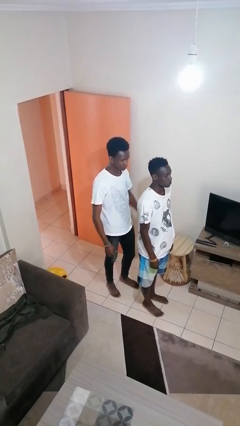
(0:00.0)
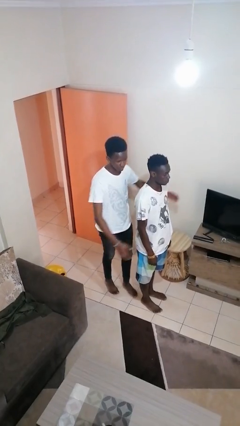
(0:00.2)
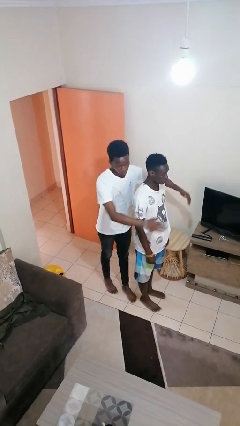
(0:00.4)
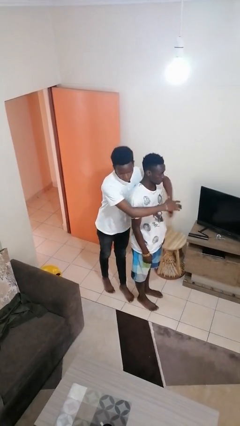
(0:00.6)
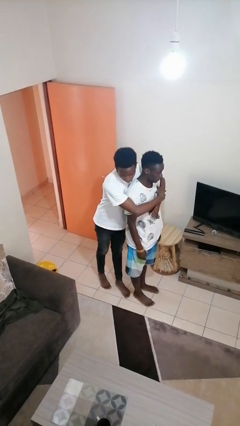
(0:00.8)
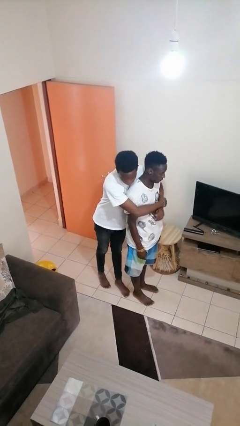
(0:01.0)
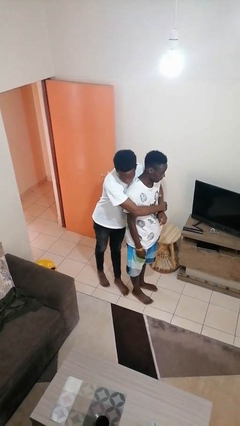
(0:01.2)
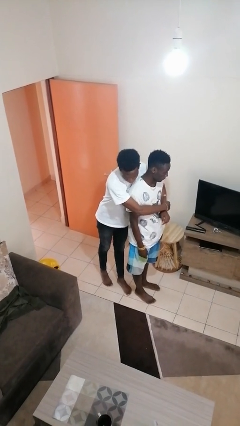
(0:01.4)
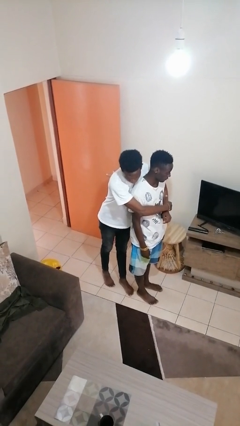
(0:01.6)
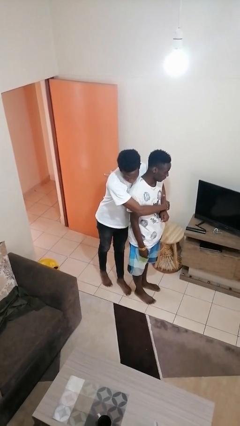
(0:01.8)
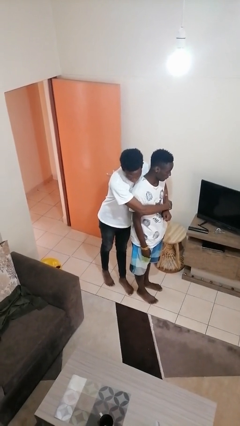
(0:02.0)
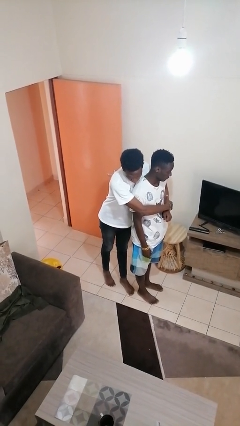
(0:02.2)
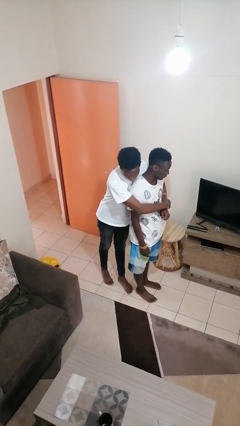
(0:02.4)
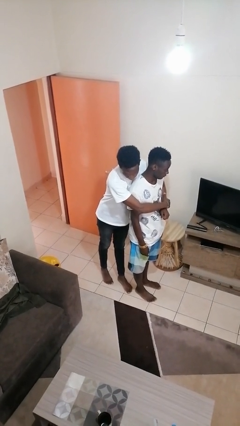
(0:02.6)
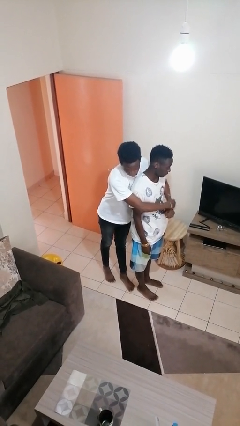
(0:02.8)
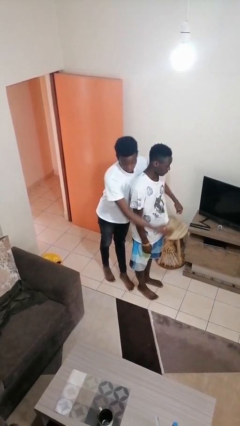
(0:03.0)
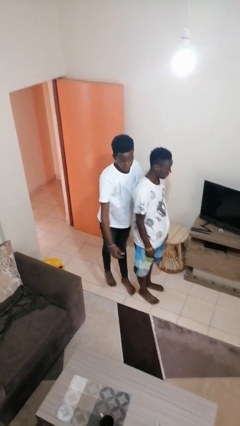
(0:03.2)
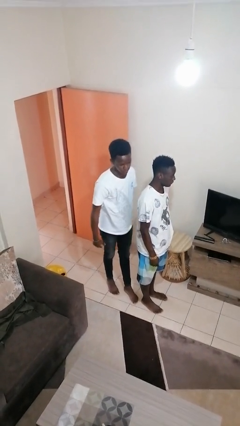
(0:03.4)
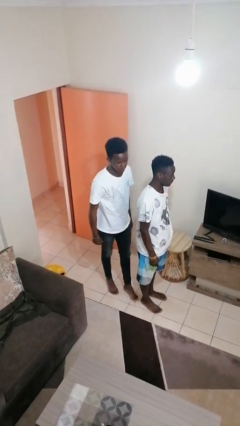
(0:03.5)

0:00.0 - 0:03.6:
person hugs person from behind

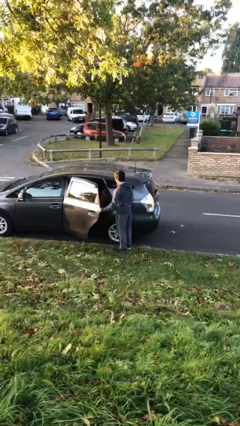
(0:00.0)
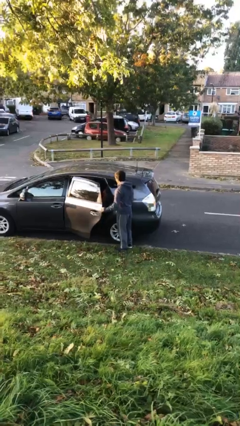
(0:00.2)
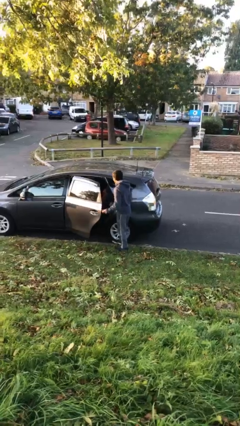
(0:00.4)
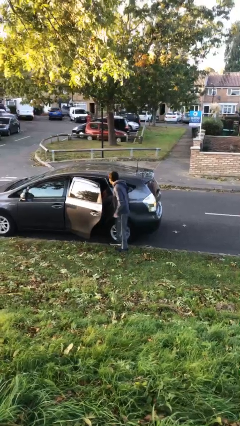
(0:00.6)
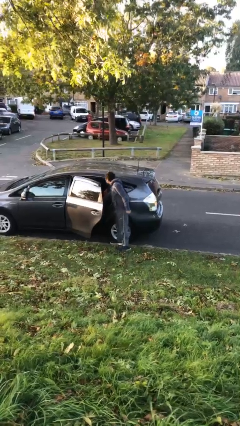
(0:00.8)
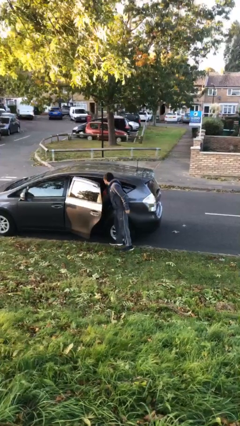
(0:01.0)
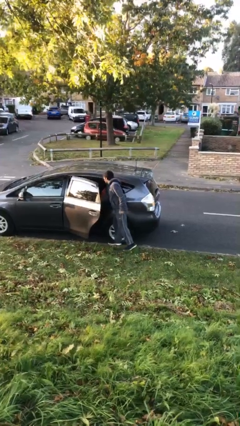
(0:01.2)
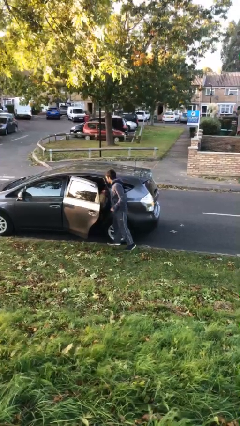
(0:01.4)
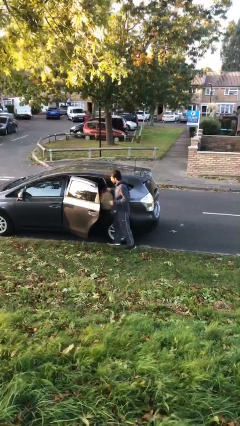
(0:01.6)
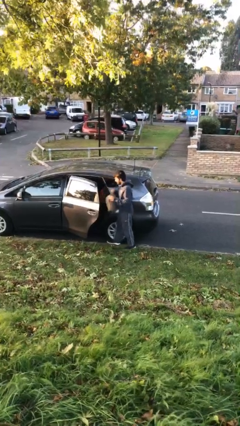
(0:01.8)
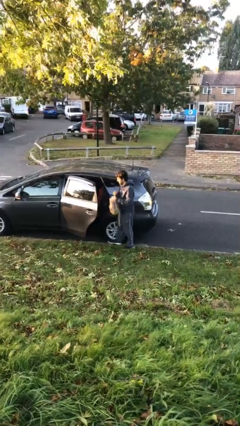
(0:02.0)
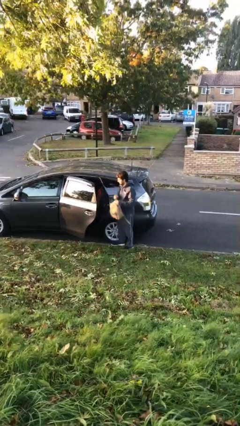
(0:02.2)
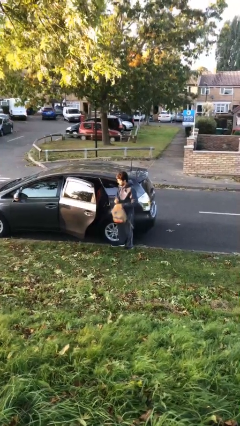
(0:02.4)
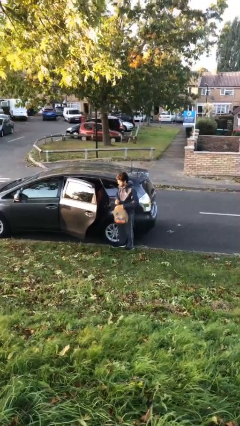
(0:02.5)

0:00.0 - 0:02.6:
person unloads car

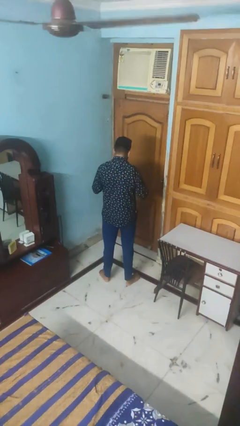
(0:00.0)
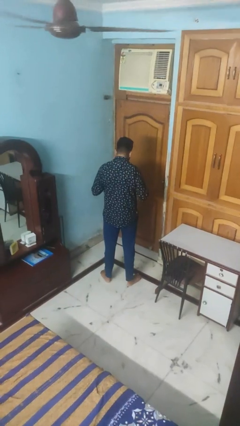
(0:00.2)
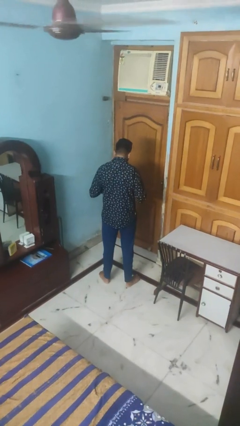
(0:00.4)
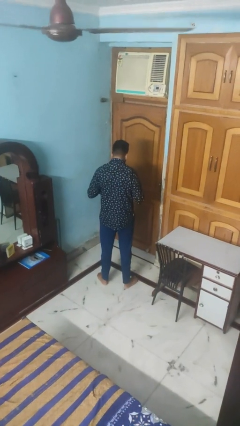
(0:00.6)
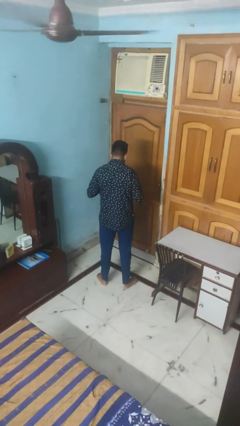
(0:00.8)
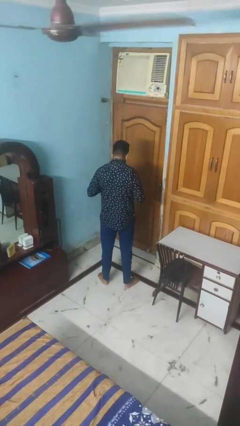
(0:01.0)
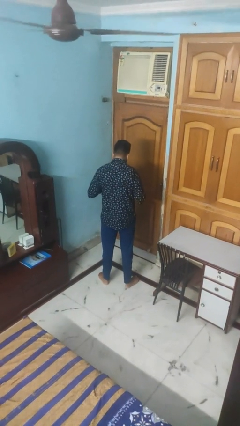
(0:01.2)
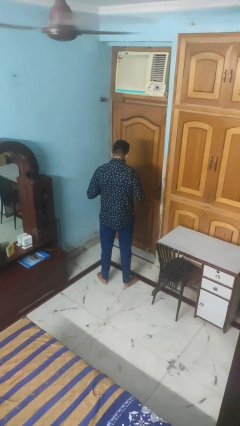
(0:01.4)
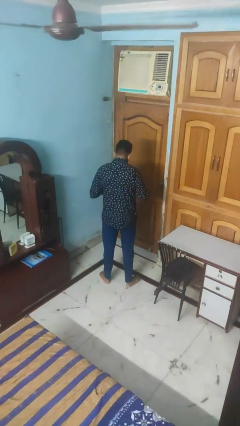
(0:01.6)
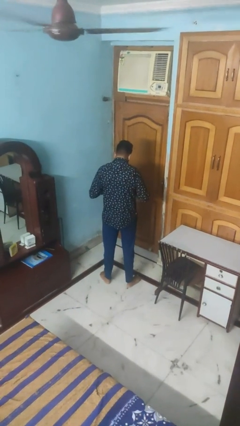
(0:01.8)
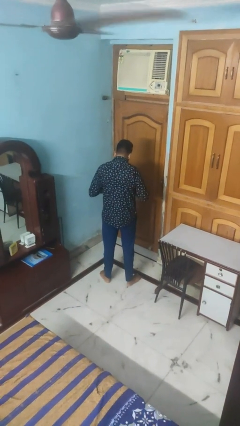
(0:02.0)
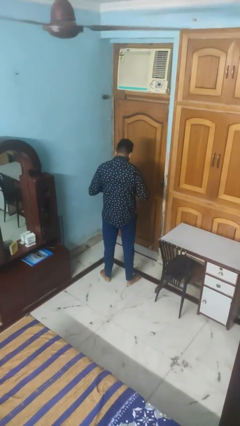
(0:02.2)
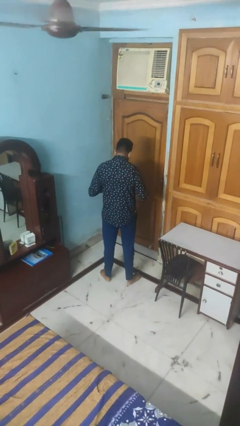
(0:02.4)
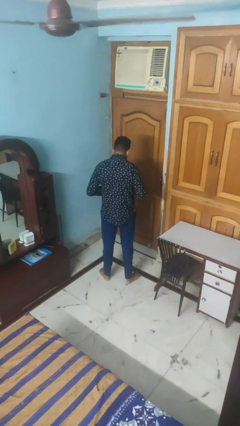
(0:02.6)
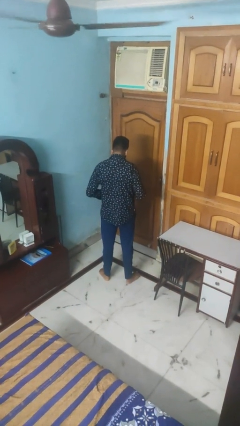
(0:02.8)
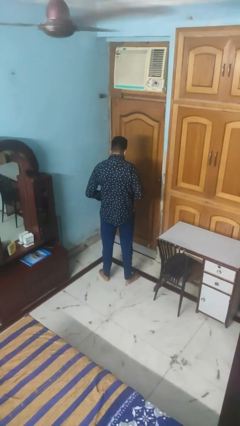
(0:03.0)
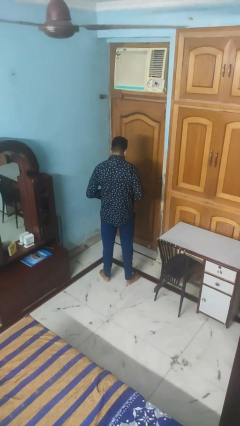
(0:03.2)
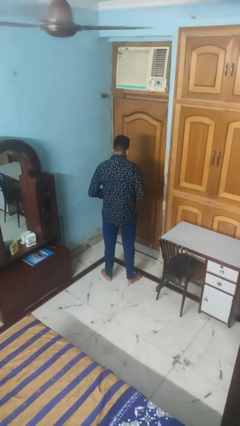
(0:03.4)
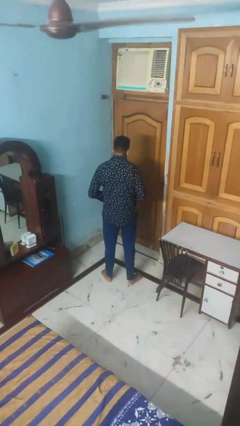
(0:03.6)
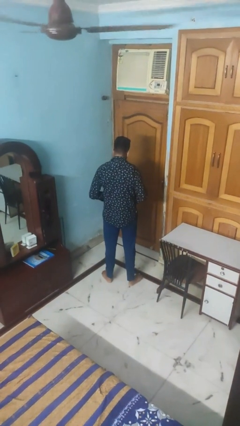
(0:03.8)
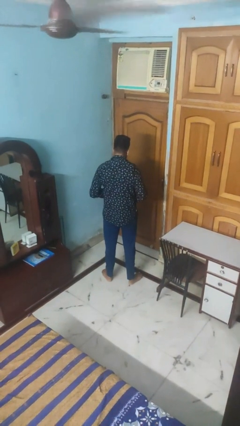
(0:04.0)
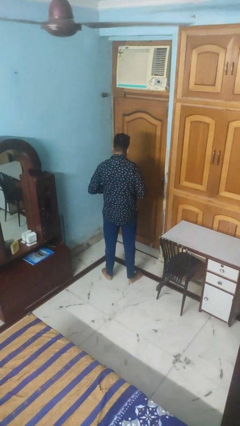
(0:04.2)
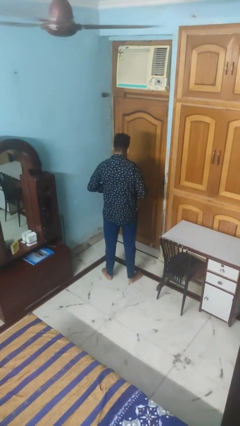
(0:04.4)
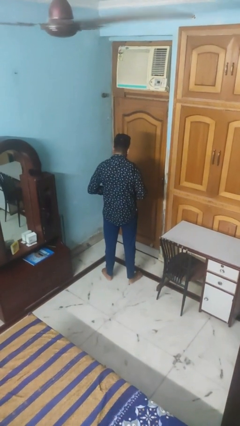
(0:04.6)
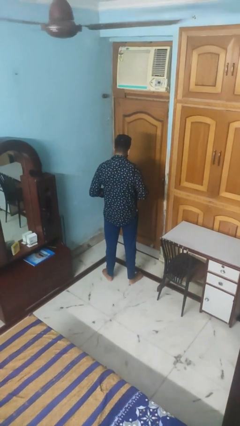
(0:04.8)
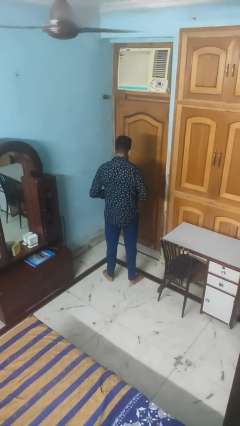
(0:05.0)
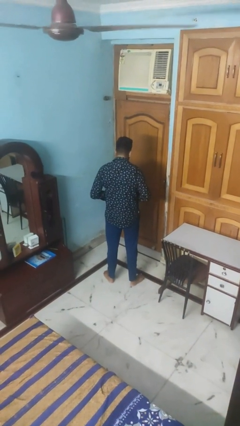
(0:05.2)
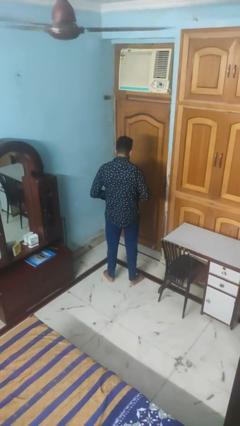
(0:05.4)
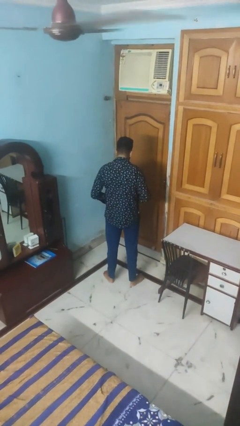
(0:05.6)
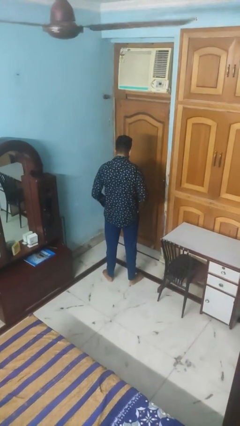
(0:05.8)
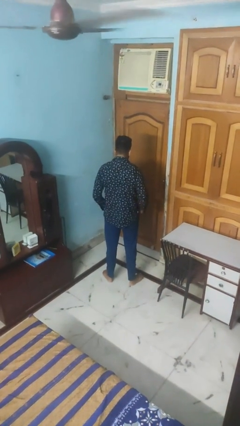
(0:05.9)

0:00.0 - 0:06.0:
person unbuttons shirt

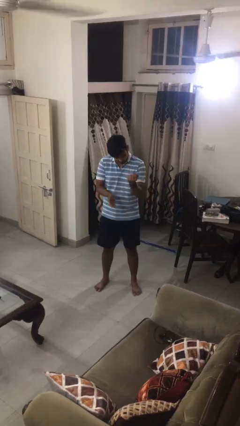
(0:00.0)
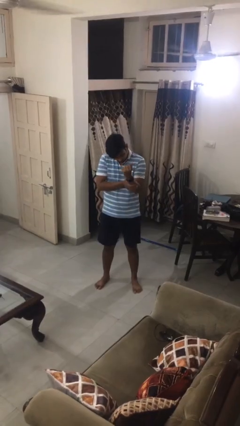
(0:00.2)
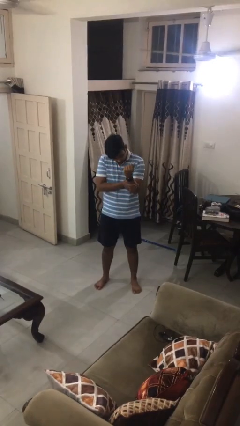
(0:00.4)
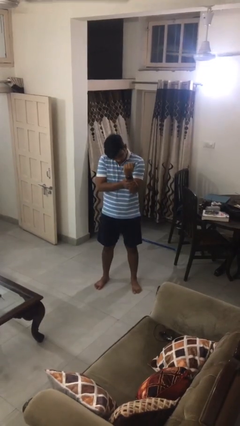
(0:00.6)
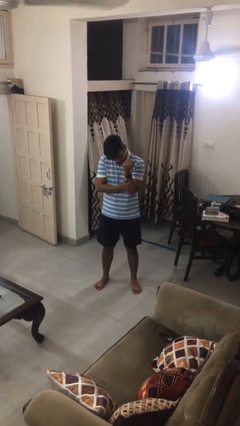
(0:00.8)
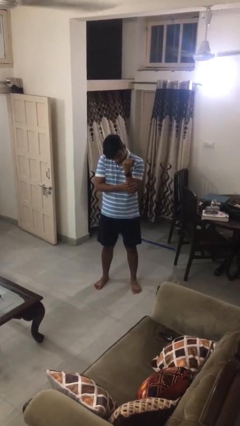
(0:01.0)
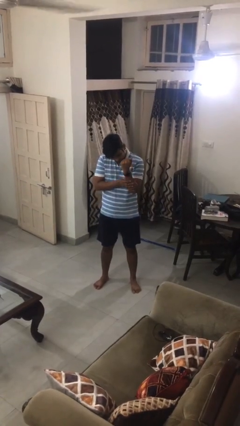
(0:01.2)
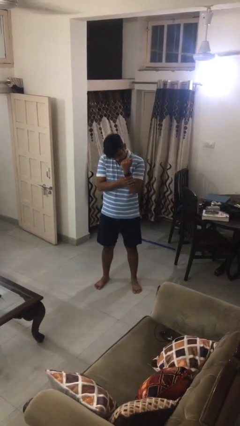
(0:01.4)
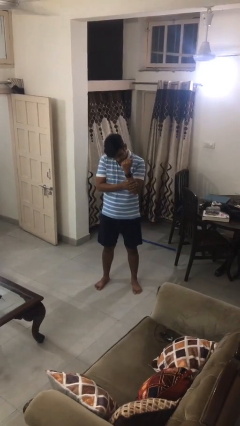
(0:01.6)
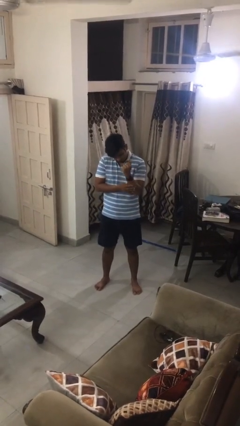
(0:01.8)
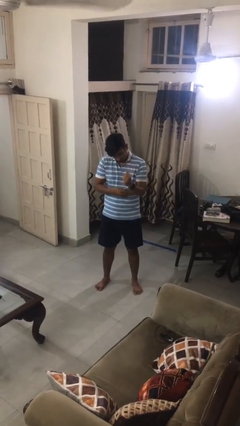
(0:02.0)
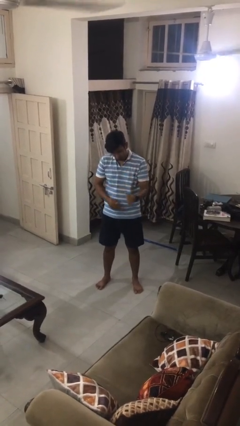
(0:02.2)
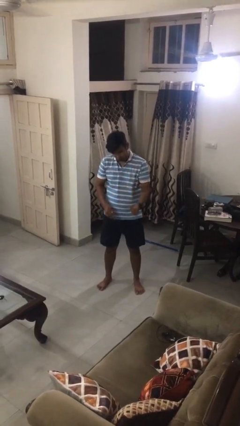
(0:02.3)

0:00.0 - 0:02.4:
person swats bug

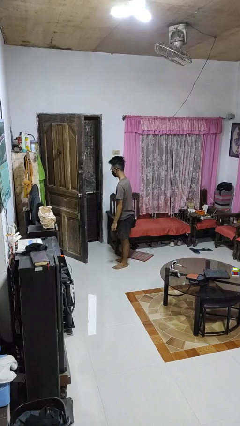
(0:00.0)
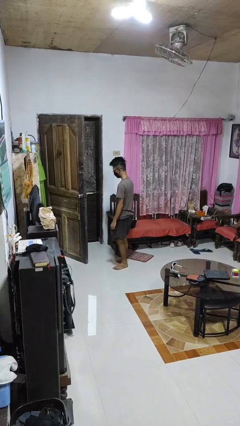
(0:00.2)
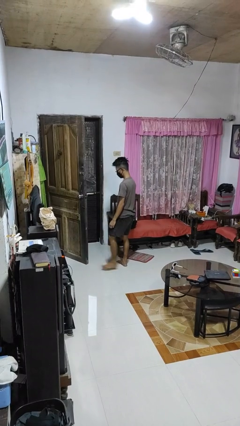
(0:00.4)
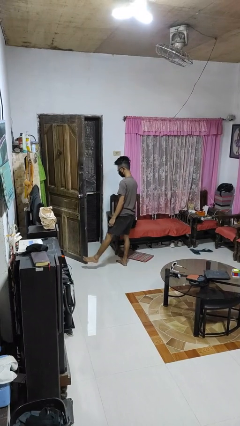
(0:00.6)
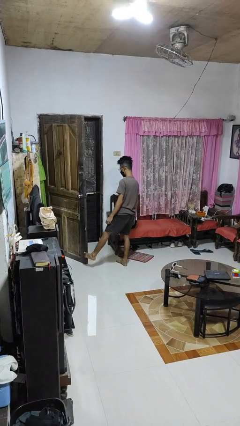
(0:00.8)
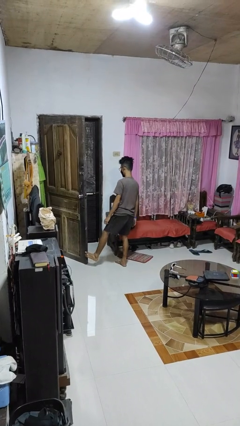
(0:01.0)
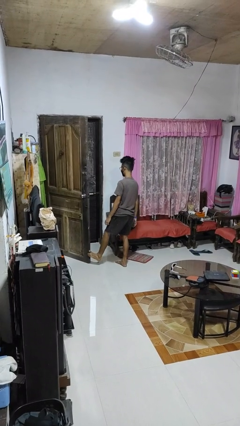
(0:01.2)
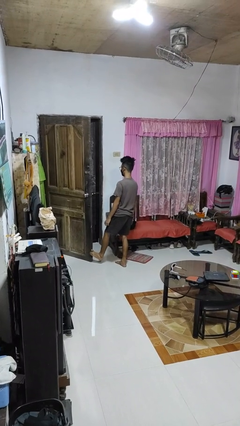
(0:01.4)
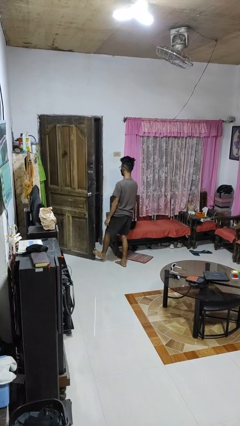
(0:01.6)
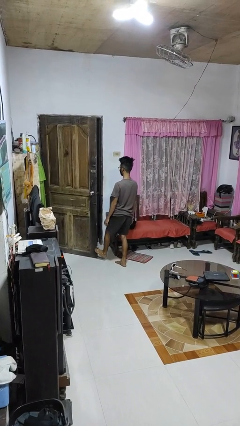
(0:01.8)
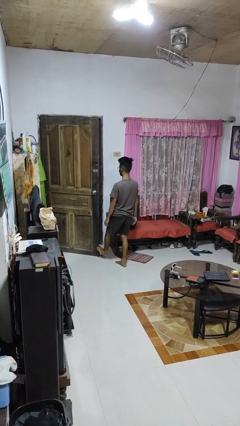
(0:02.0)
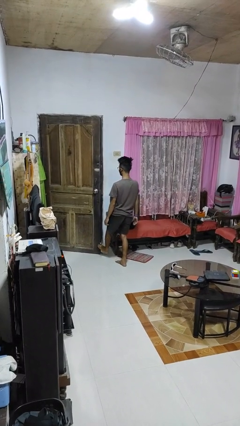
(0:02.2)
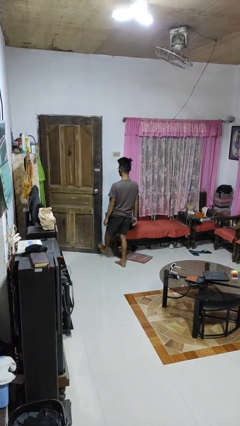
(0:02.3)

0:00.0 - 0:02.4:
person closes door with foot

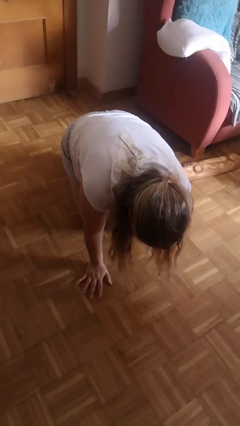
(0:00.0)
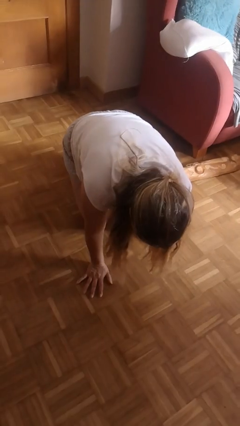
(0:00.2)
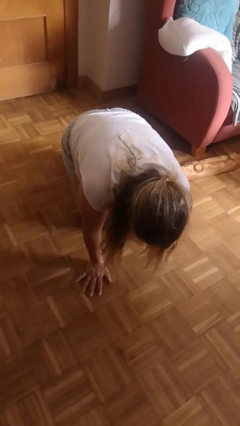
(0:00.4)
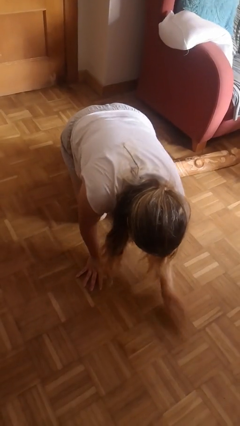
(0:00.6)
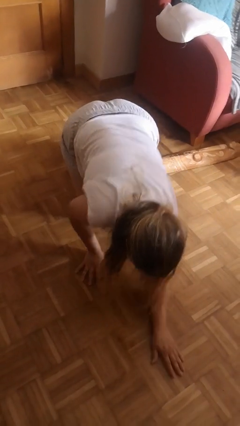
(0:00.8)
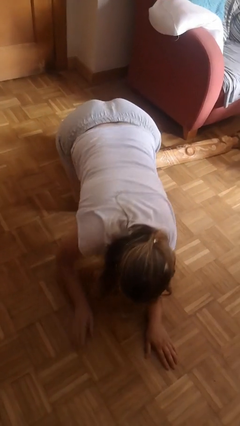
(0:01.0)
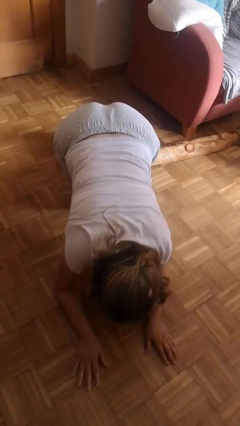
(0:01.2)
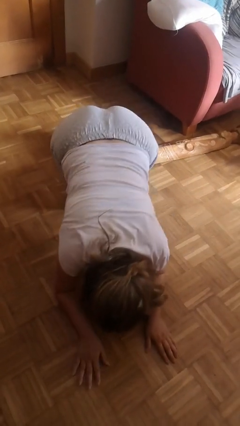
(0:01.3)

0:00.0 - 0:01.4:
person lies down on floor
